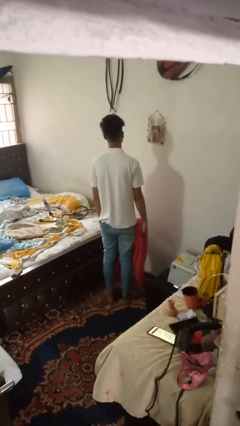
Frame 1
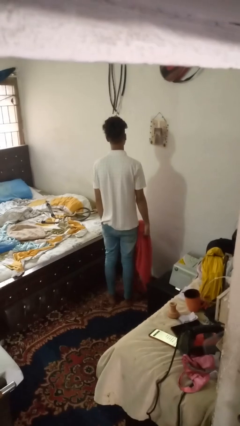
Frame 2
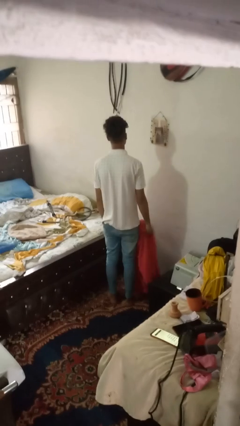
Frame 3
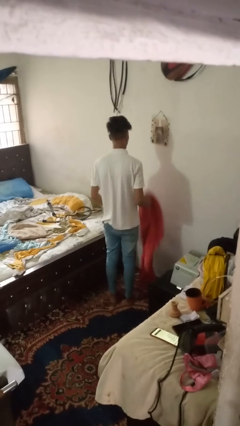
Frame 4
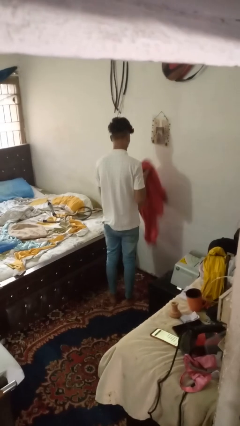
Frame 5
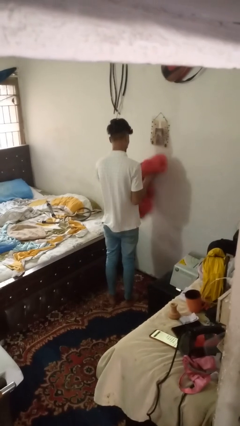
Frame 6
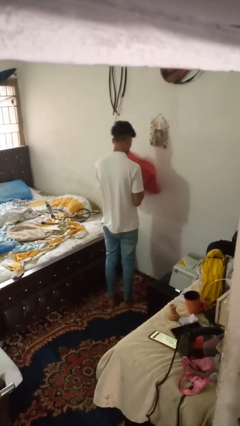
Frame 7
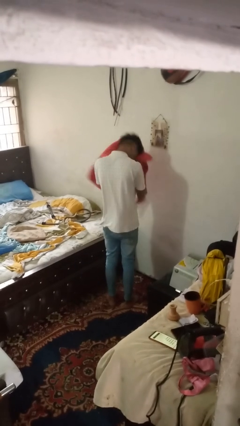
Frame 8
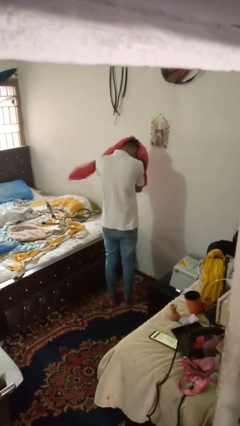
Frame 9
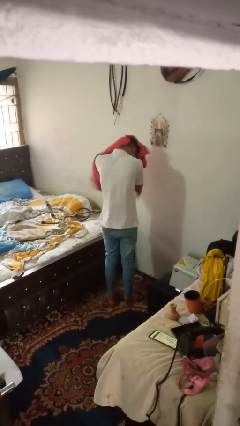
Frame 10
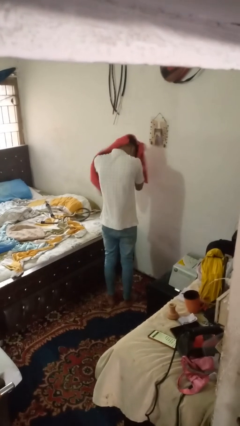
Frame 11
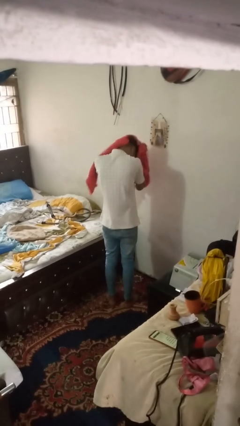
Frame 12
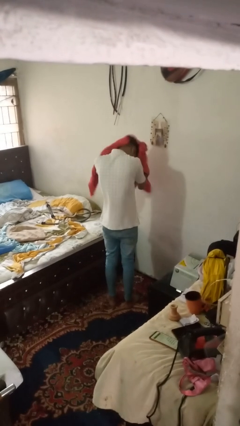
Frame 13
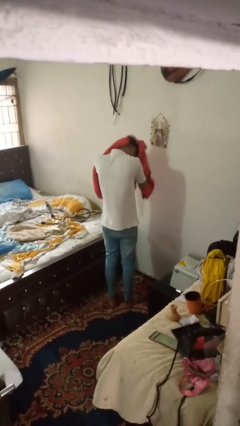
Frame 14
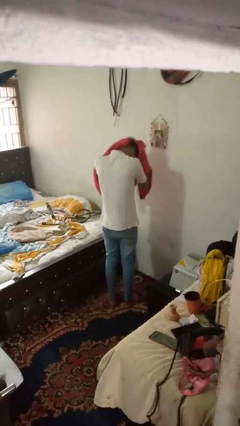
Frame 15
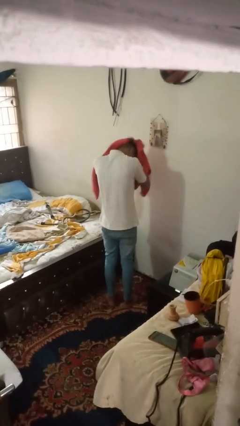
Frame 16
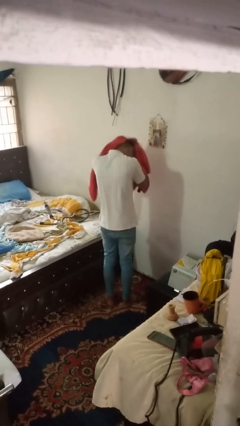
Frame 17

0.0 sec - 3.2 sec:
person dries hair with towel

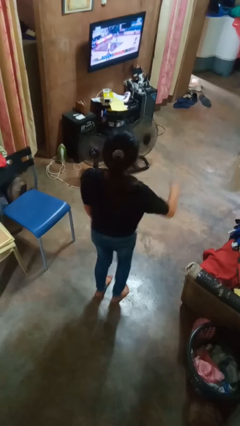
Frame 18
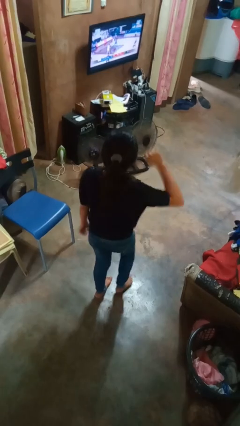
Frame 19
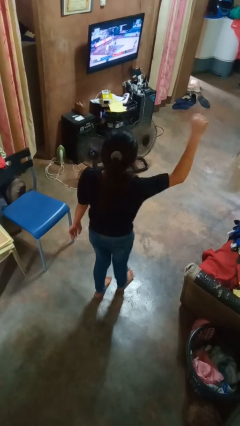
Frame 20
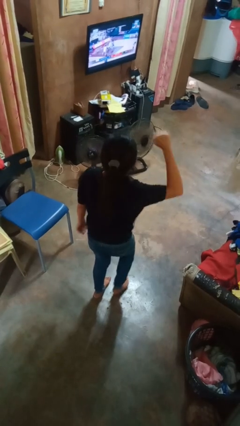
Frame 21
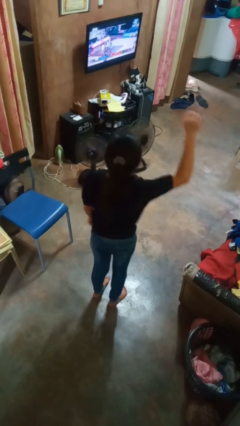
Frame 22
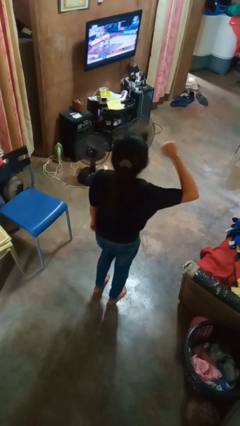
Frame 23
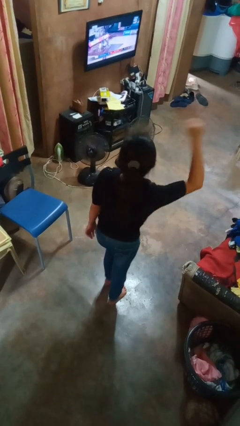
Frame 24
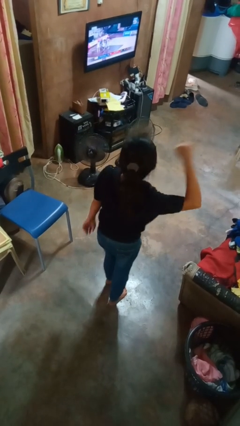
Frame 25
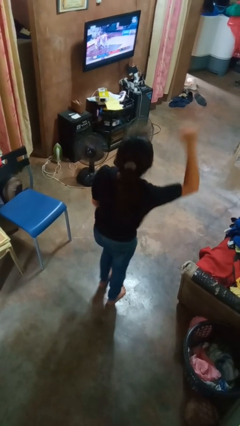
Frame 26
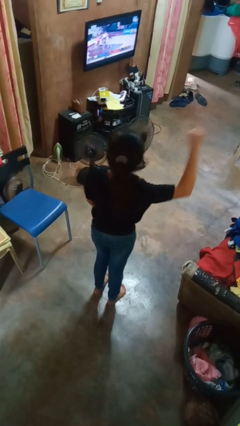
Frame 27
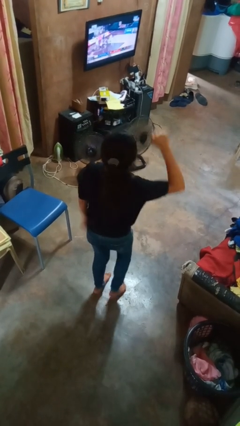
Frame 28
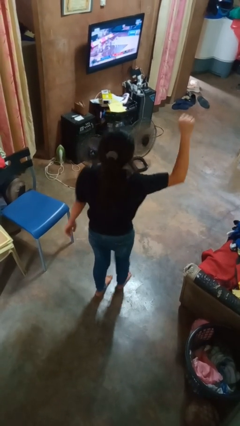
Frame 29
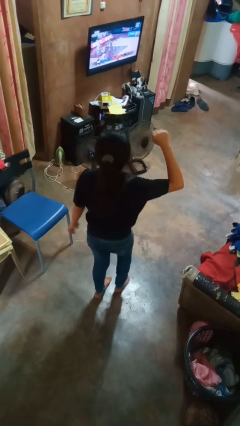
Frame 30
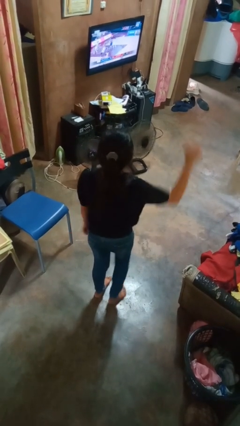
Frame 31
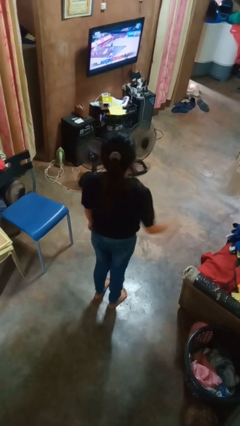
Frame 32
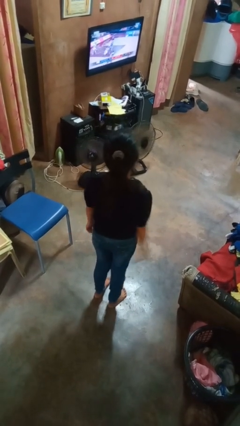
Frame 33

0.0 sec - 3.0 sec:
person dances in place

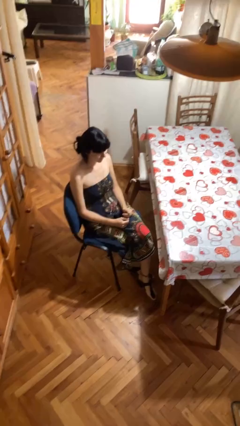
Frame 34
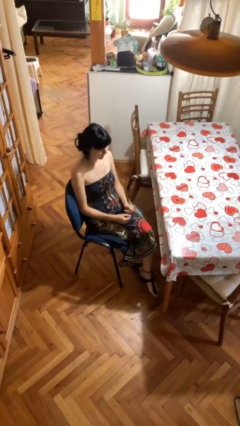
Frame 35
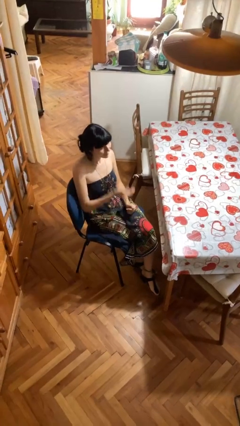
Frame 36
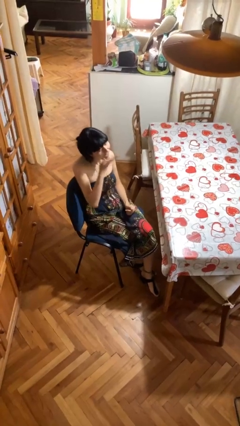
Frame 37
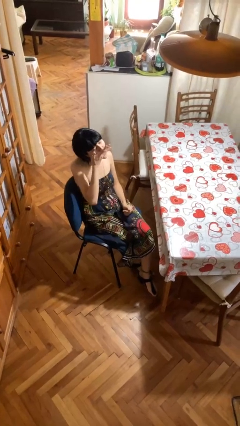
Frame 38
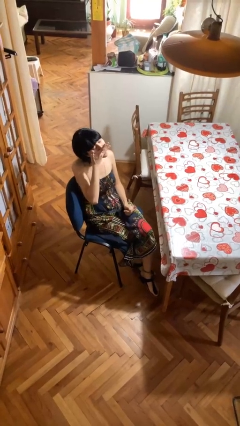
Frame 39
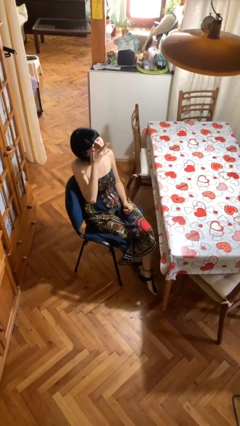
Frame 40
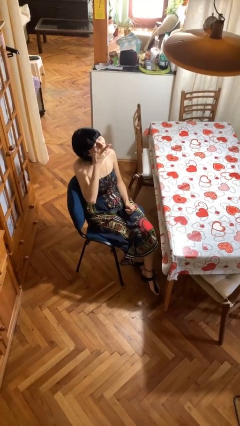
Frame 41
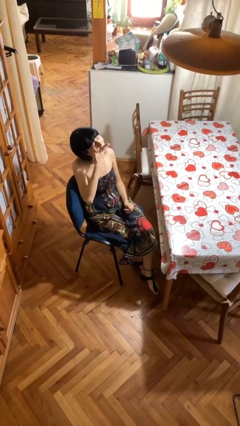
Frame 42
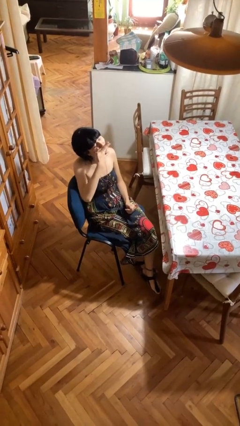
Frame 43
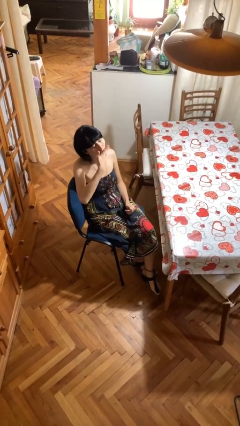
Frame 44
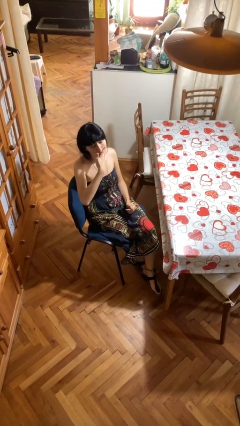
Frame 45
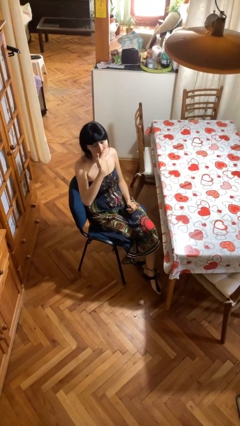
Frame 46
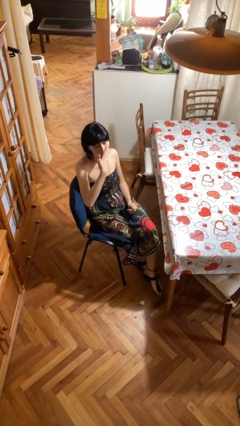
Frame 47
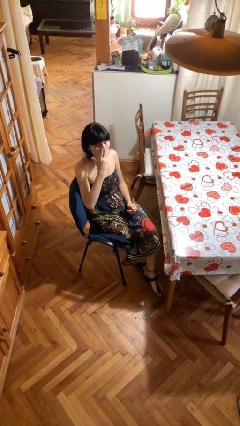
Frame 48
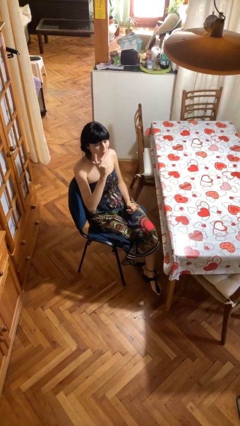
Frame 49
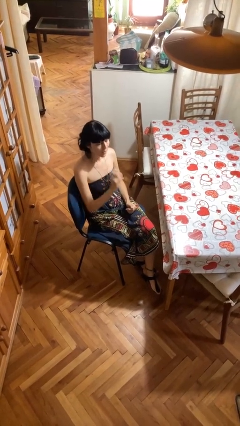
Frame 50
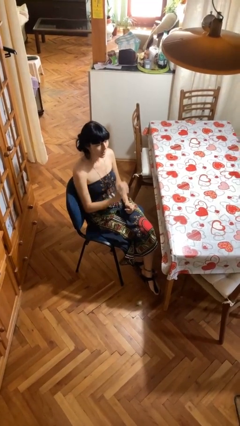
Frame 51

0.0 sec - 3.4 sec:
person licks fingers

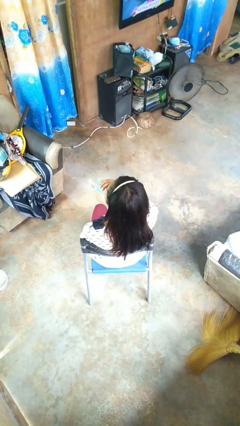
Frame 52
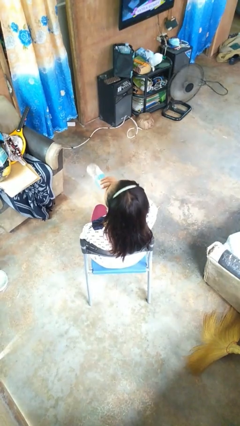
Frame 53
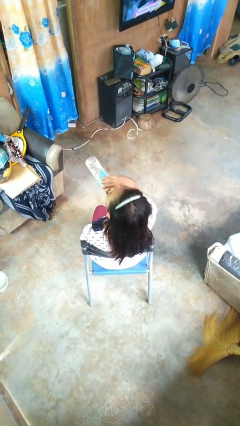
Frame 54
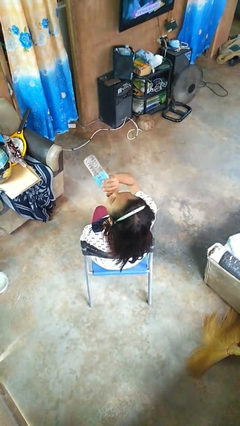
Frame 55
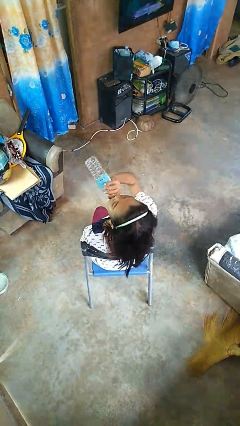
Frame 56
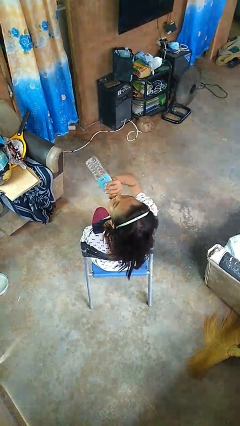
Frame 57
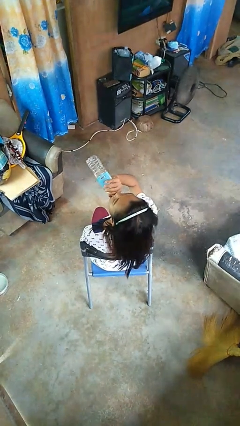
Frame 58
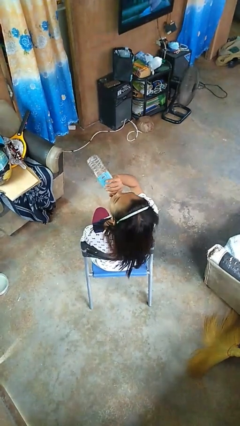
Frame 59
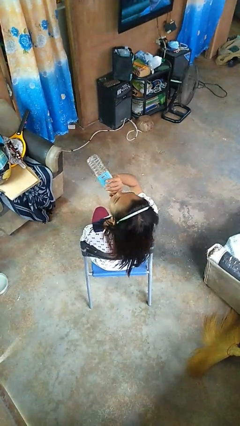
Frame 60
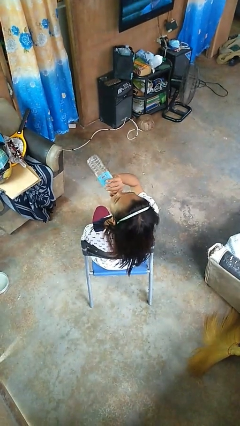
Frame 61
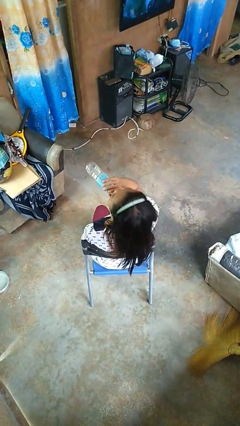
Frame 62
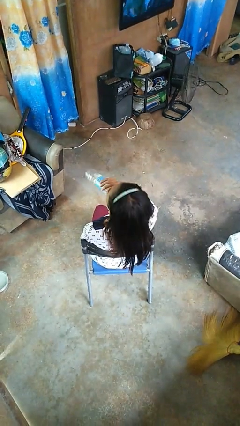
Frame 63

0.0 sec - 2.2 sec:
person drinks from bottle

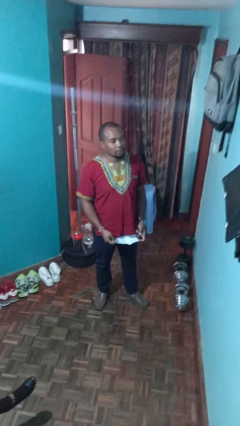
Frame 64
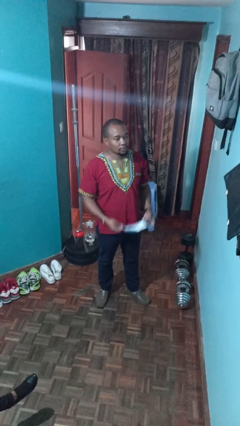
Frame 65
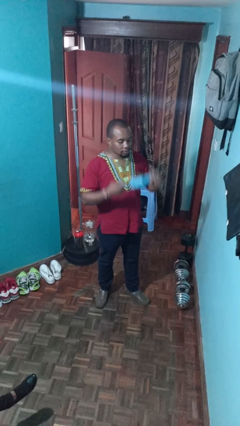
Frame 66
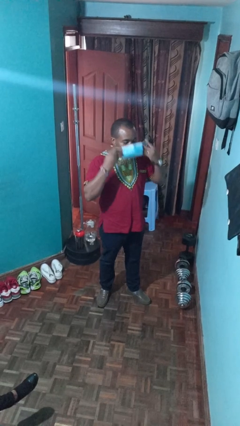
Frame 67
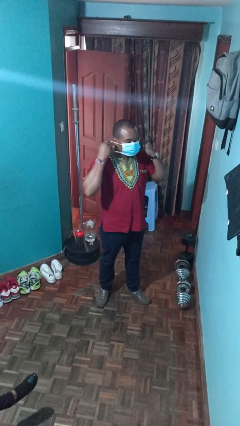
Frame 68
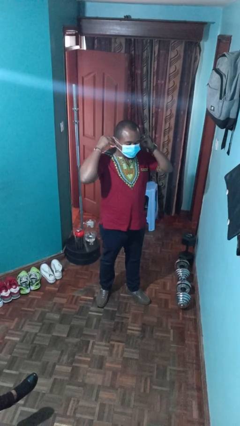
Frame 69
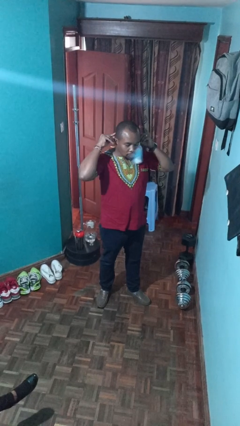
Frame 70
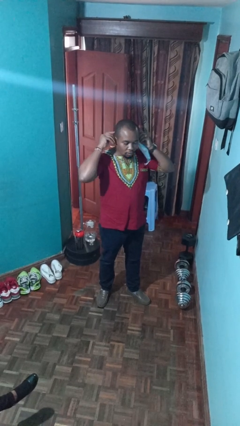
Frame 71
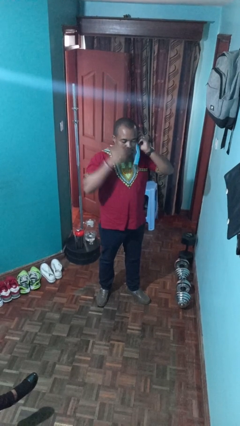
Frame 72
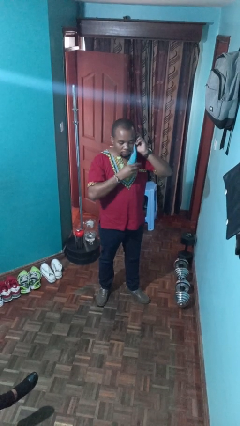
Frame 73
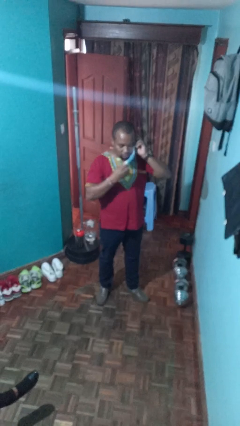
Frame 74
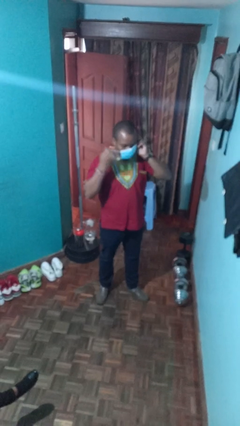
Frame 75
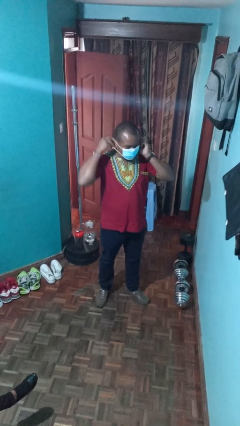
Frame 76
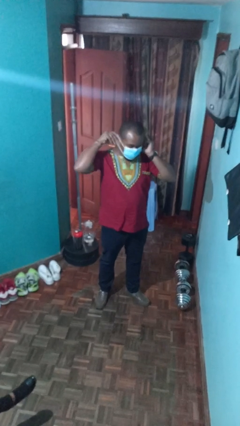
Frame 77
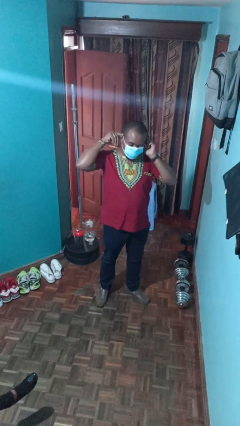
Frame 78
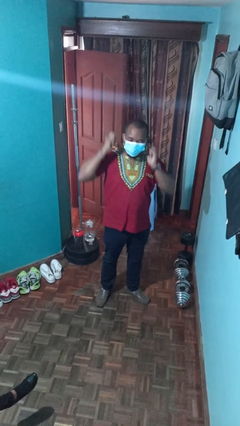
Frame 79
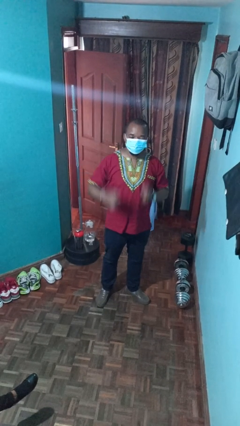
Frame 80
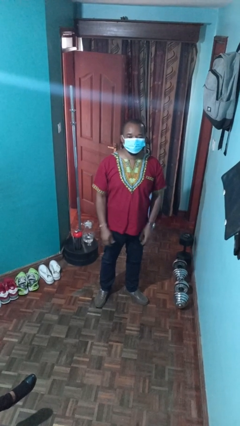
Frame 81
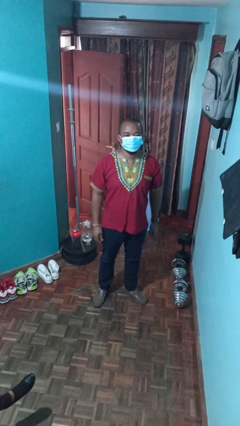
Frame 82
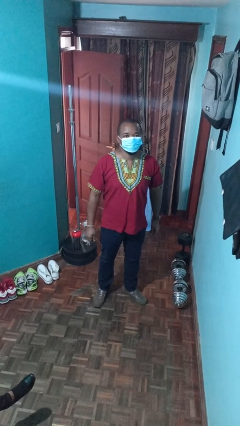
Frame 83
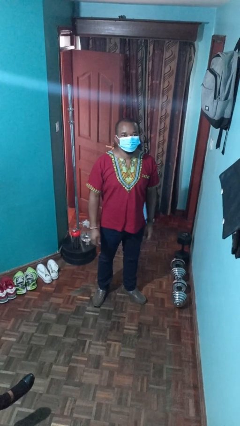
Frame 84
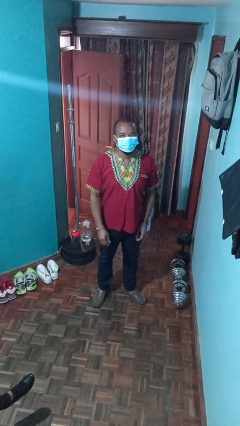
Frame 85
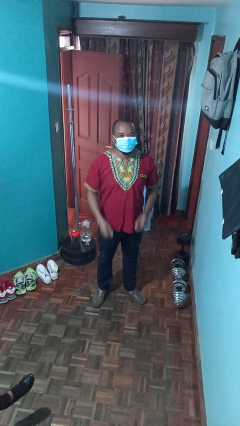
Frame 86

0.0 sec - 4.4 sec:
person puts on facemask

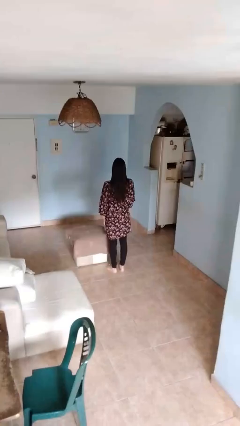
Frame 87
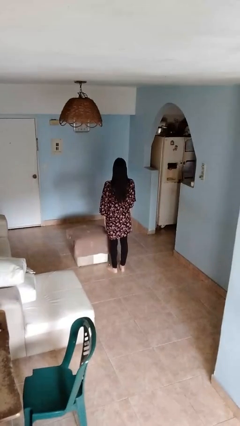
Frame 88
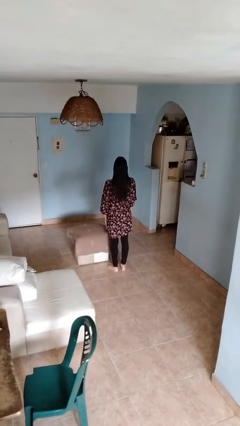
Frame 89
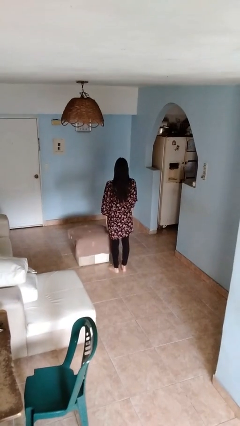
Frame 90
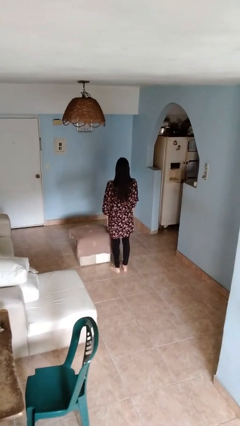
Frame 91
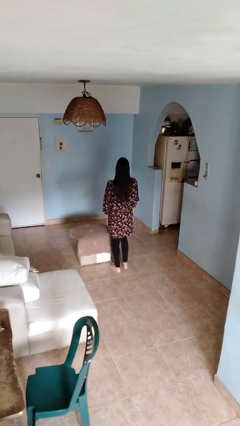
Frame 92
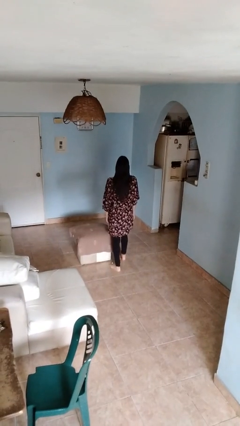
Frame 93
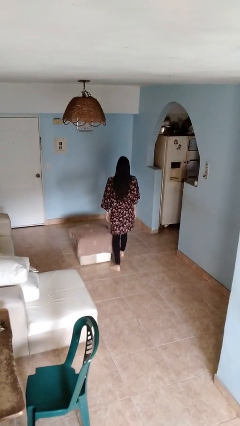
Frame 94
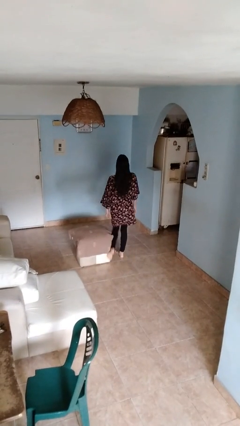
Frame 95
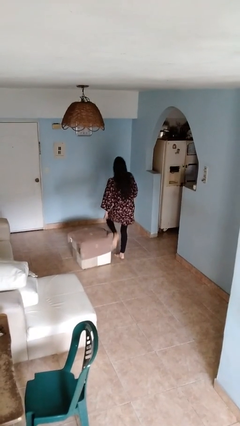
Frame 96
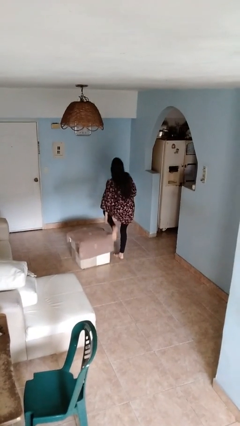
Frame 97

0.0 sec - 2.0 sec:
person stubs toe
